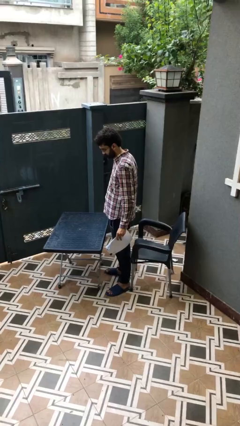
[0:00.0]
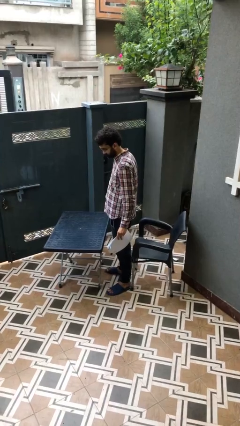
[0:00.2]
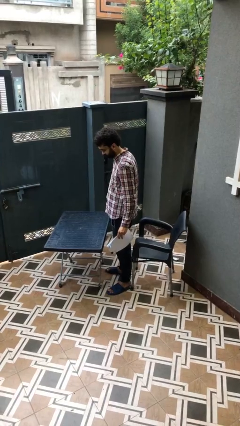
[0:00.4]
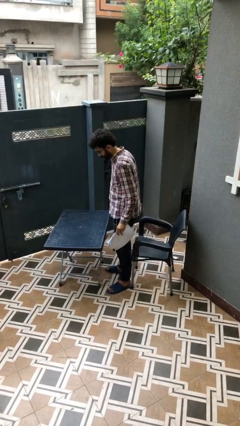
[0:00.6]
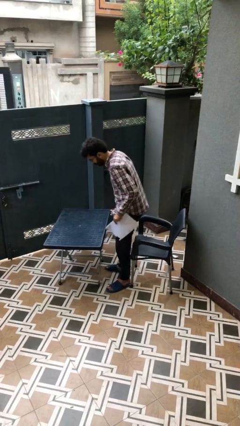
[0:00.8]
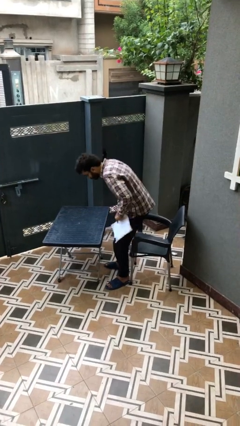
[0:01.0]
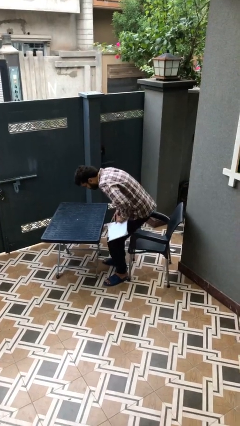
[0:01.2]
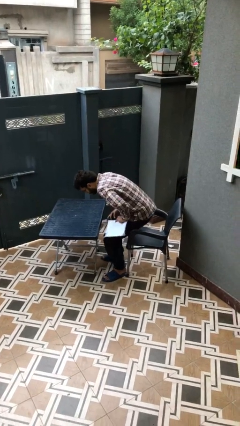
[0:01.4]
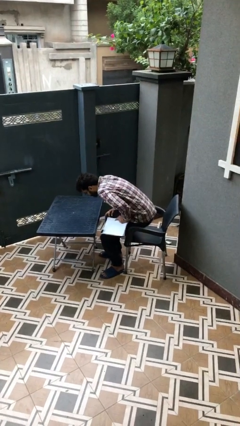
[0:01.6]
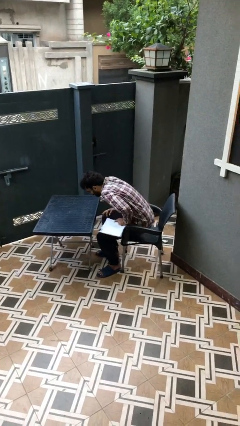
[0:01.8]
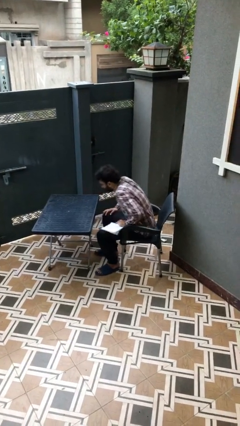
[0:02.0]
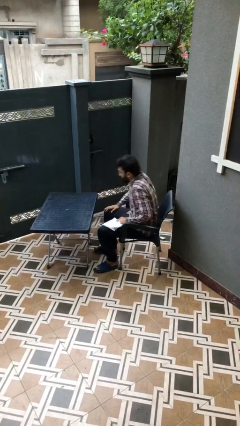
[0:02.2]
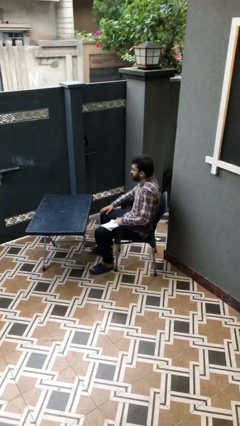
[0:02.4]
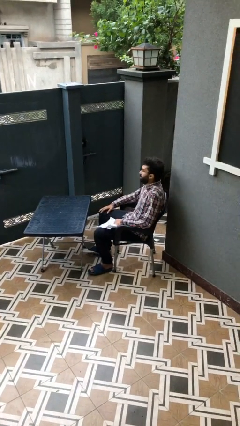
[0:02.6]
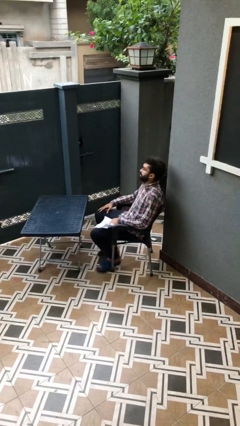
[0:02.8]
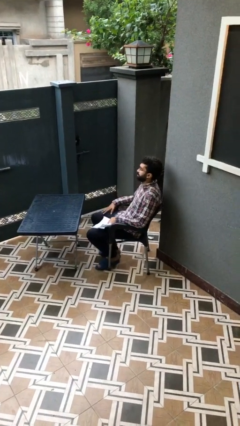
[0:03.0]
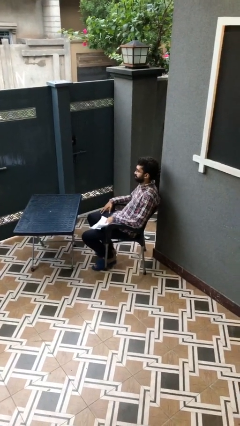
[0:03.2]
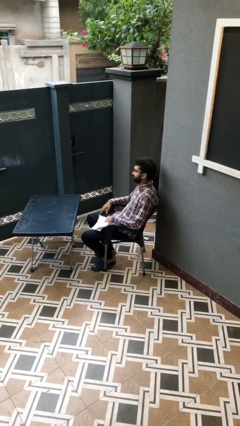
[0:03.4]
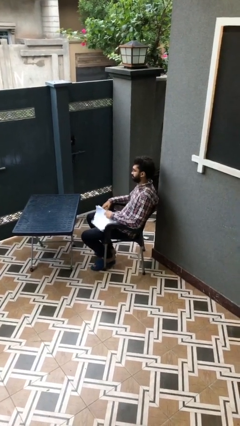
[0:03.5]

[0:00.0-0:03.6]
person sits down

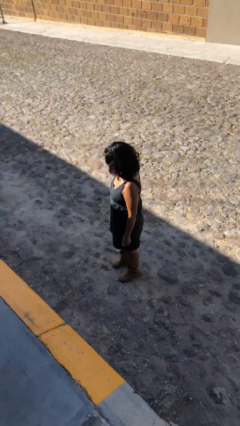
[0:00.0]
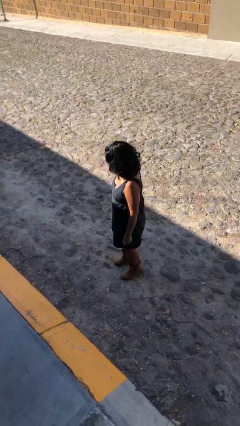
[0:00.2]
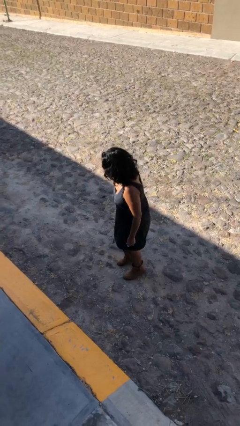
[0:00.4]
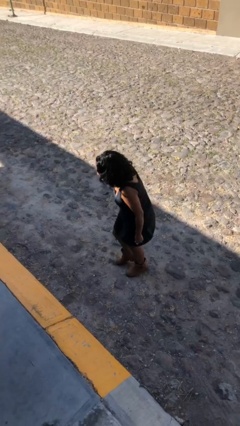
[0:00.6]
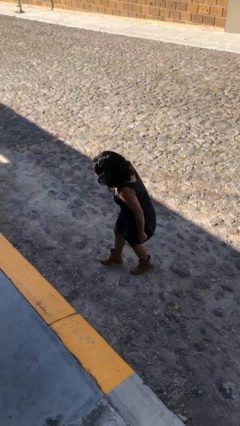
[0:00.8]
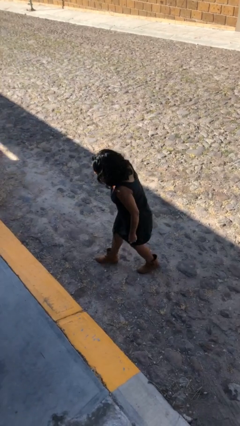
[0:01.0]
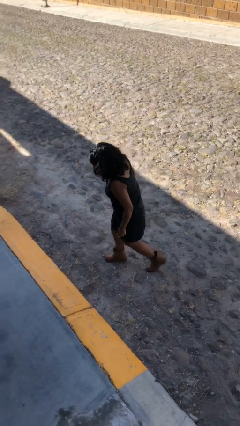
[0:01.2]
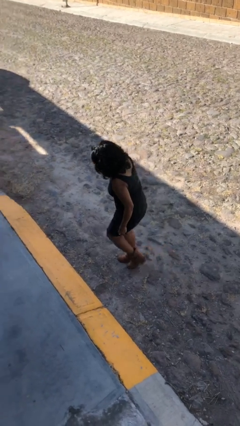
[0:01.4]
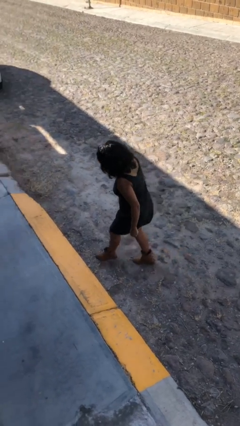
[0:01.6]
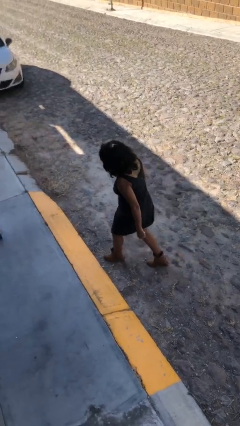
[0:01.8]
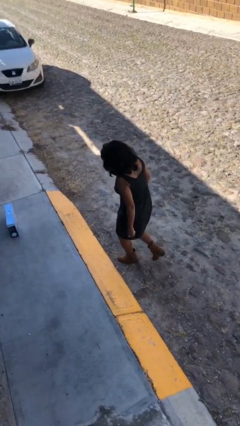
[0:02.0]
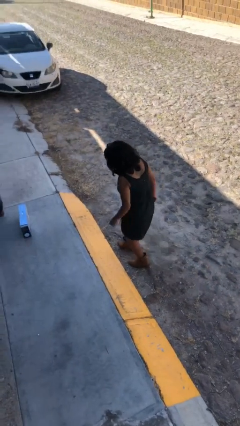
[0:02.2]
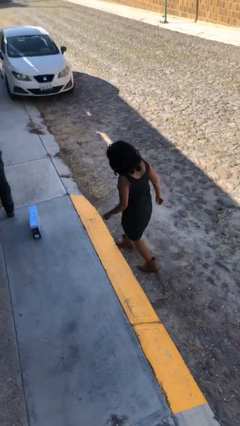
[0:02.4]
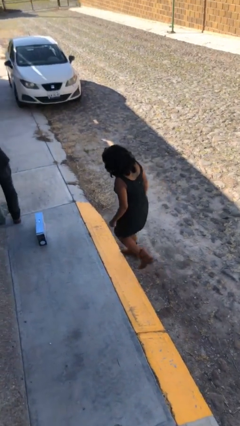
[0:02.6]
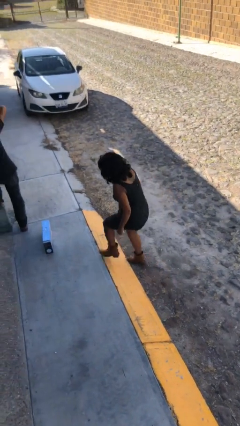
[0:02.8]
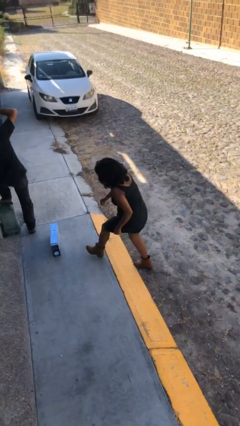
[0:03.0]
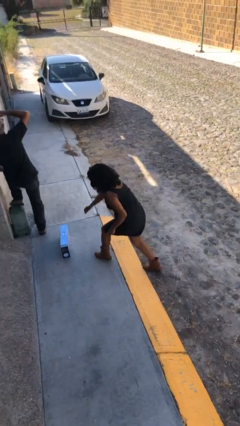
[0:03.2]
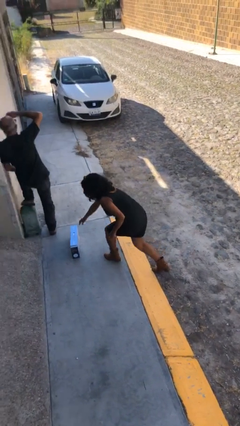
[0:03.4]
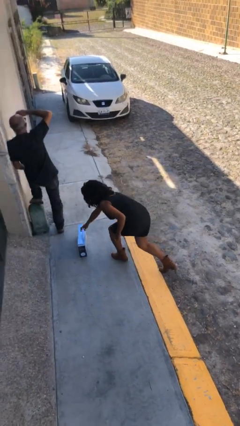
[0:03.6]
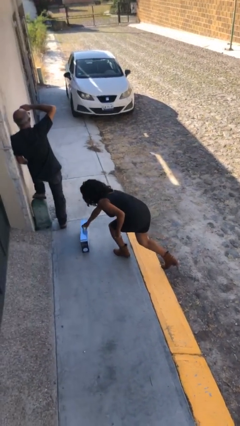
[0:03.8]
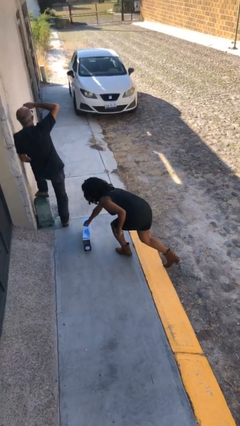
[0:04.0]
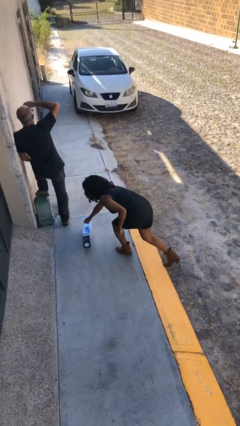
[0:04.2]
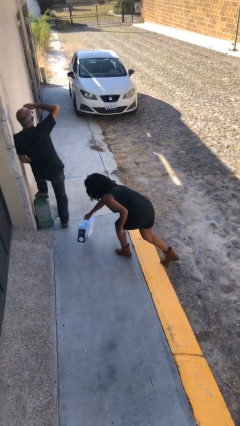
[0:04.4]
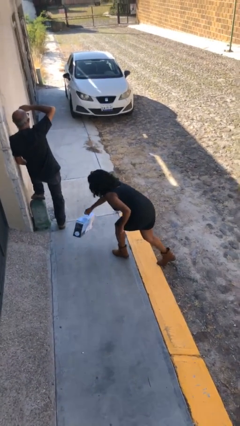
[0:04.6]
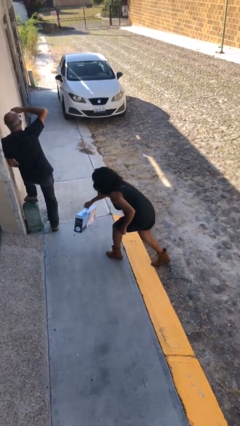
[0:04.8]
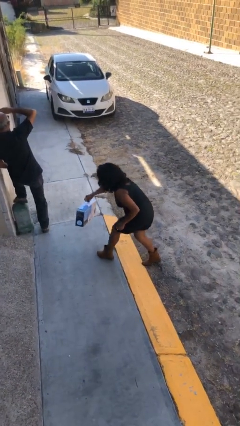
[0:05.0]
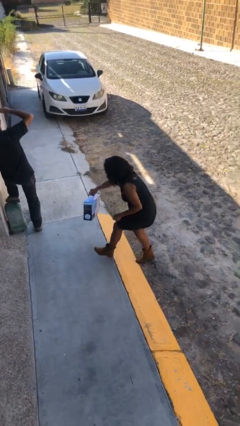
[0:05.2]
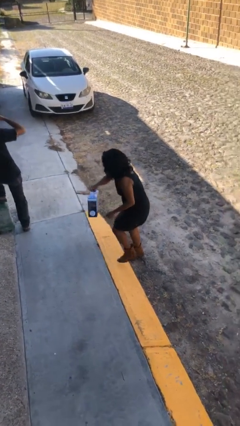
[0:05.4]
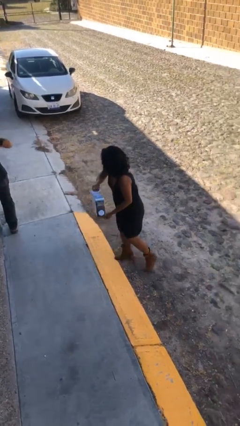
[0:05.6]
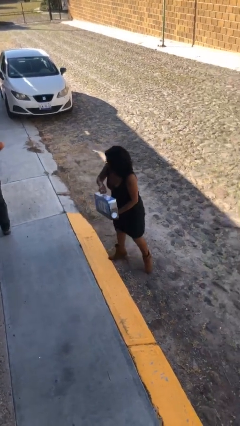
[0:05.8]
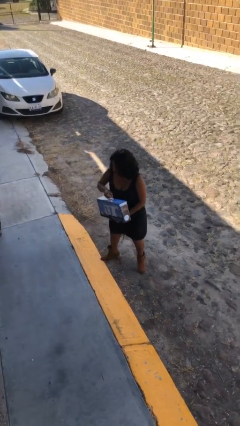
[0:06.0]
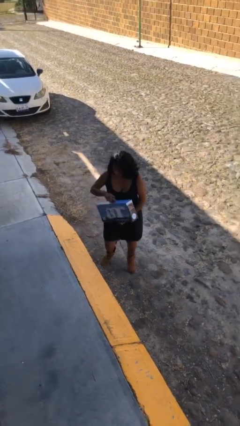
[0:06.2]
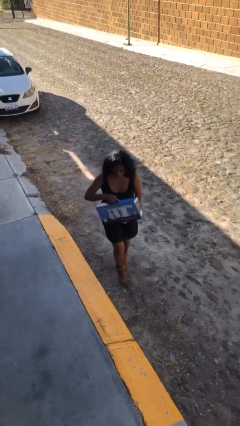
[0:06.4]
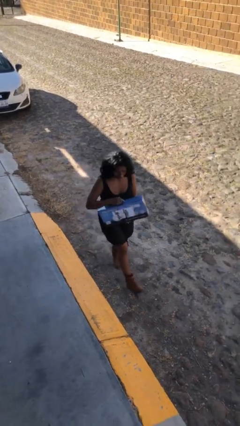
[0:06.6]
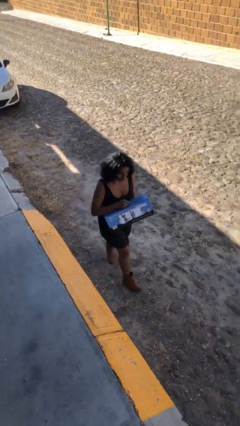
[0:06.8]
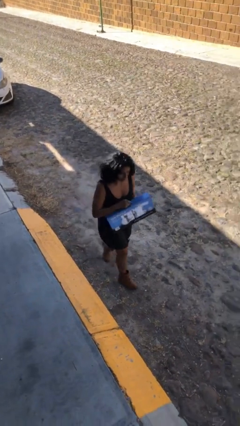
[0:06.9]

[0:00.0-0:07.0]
person steals object from person

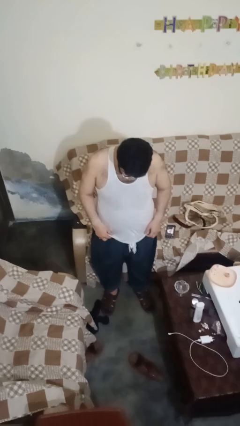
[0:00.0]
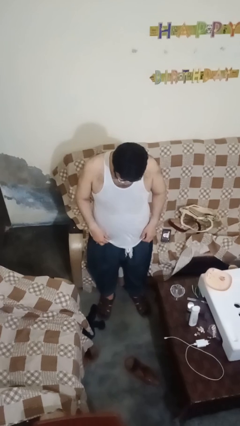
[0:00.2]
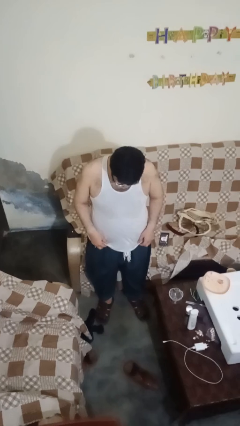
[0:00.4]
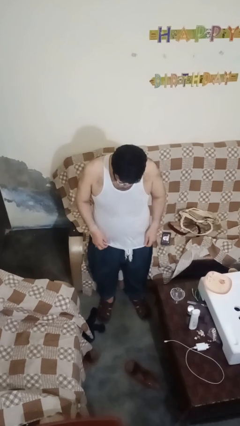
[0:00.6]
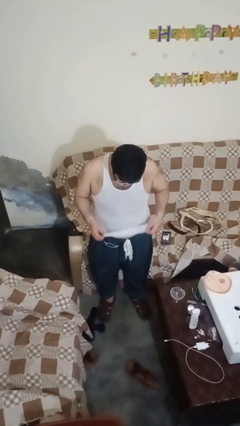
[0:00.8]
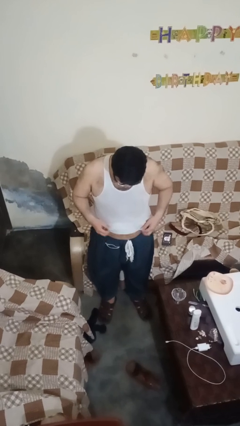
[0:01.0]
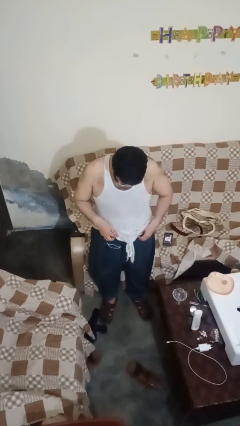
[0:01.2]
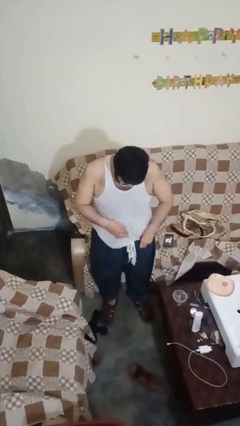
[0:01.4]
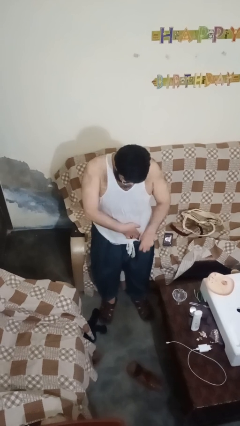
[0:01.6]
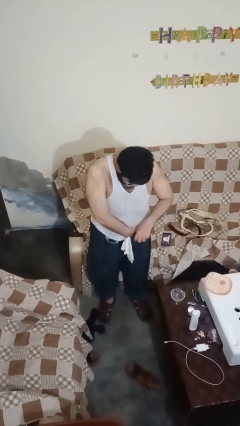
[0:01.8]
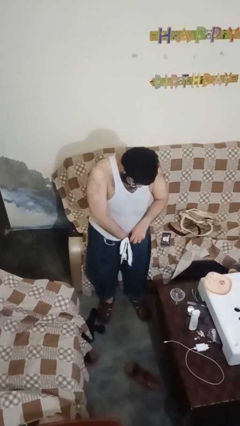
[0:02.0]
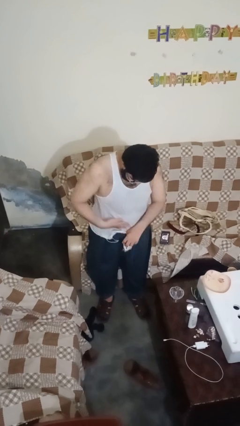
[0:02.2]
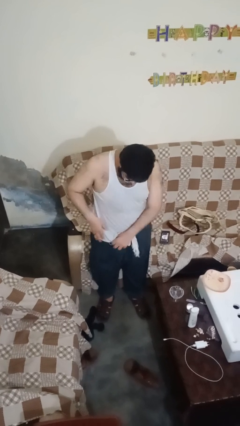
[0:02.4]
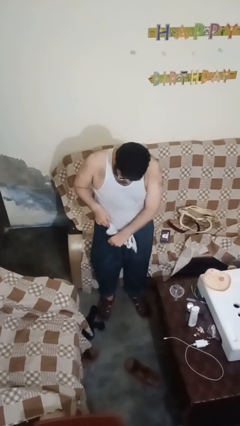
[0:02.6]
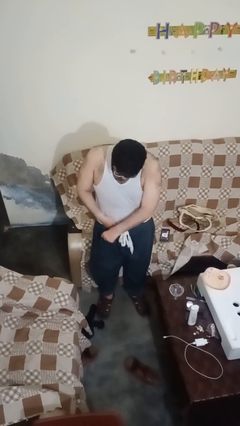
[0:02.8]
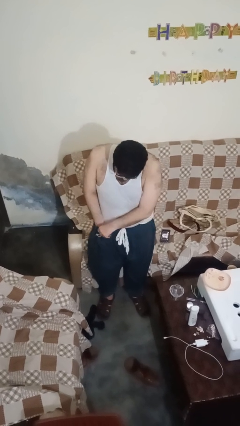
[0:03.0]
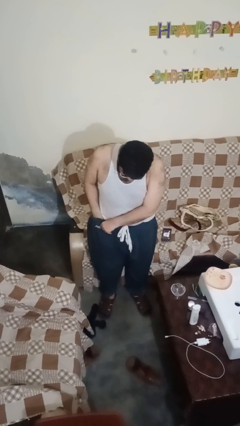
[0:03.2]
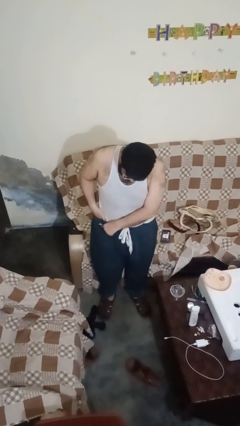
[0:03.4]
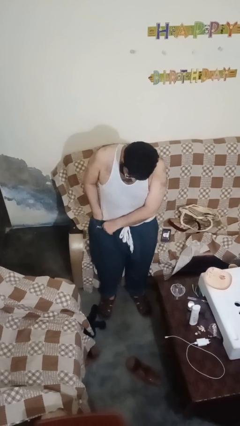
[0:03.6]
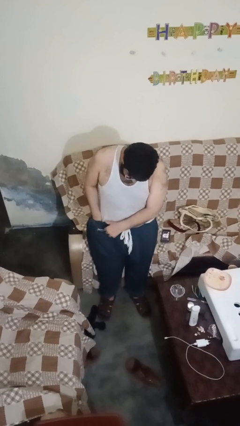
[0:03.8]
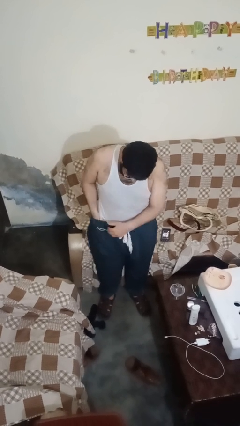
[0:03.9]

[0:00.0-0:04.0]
person tucks in shirt

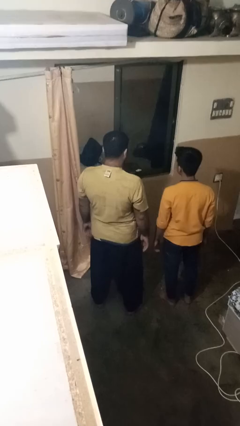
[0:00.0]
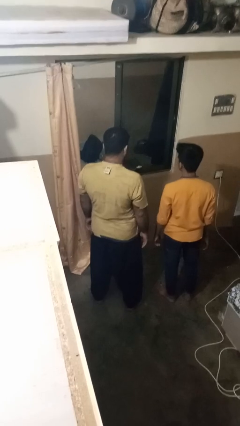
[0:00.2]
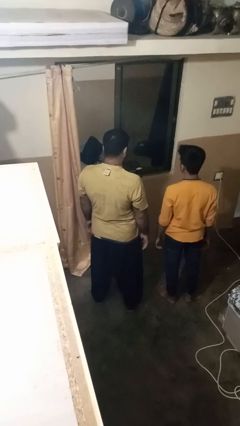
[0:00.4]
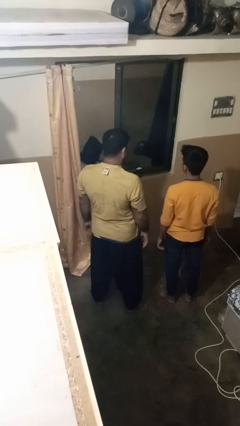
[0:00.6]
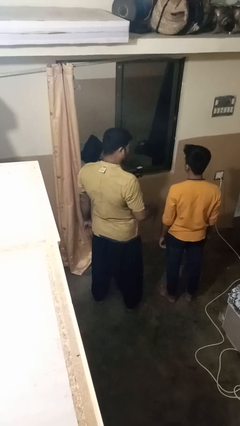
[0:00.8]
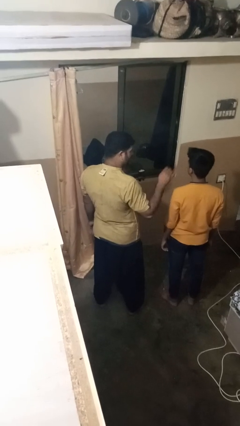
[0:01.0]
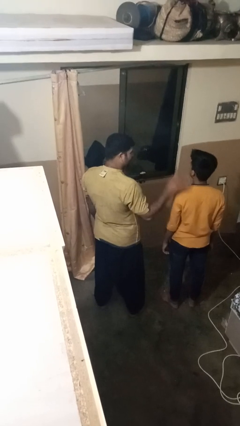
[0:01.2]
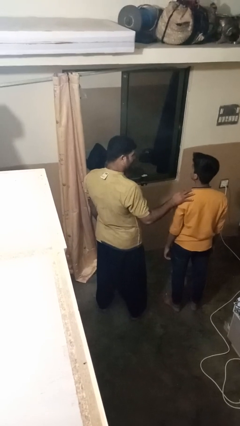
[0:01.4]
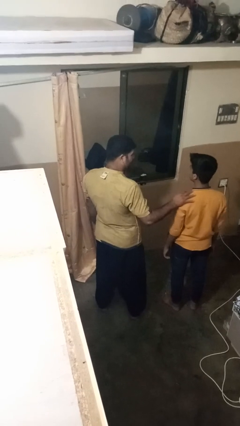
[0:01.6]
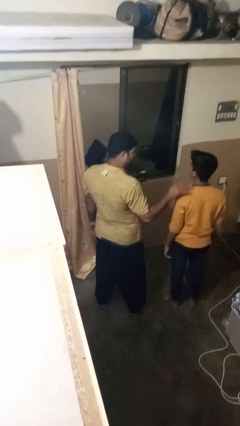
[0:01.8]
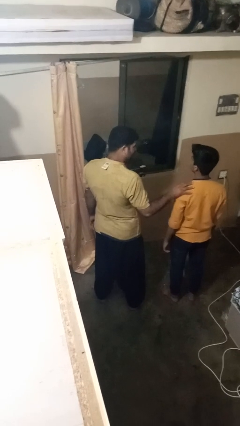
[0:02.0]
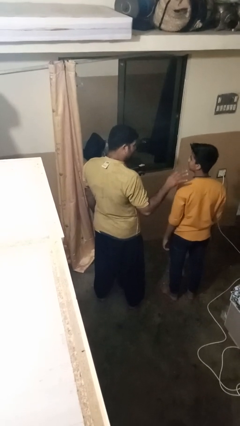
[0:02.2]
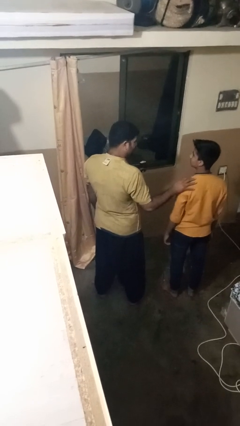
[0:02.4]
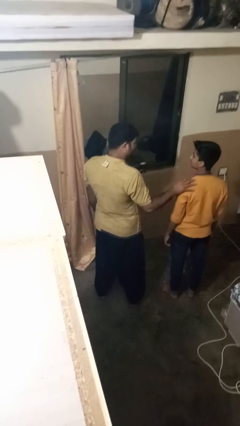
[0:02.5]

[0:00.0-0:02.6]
person pounds shoulders of person

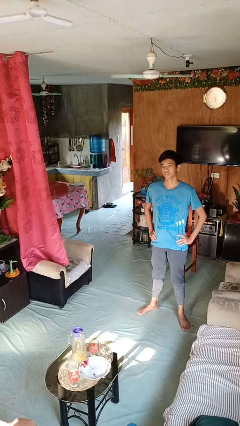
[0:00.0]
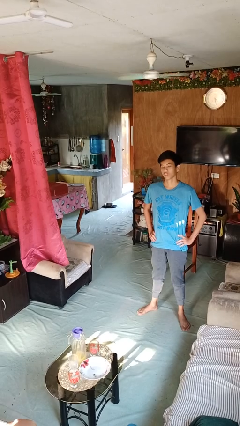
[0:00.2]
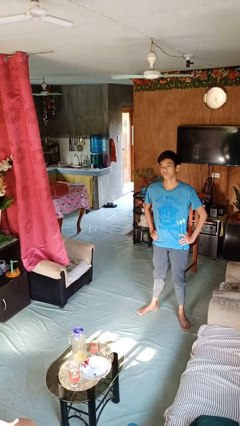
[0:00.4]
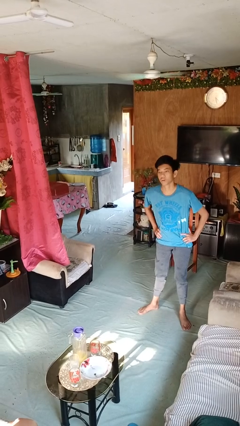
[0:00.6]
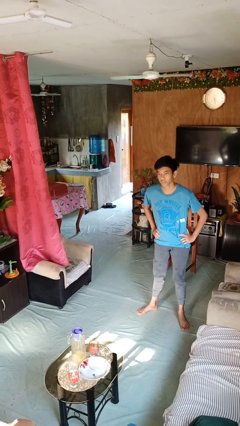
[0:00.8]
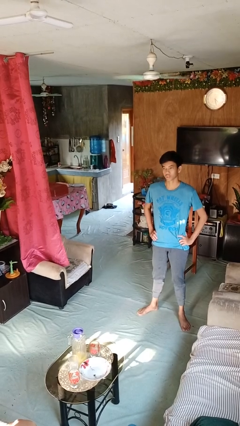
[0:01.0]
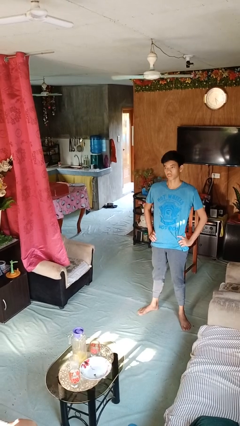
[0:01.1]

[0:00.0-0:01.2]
person wiggles hips
